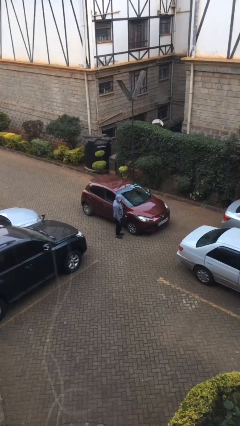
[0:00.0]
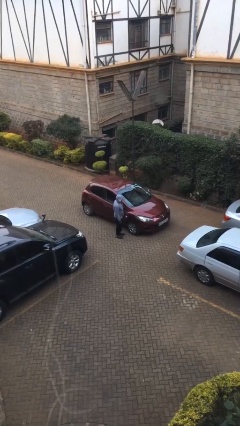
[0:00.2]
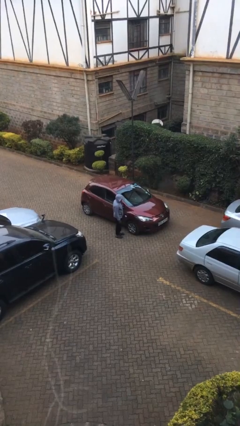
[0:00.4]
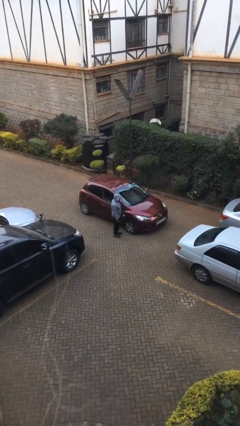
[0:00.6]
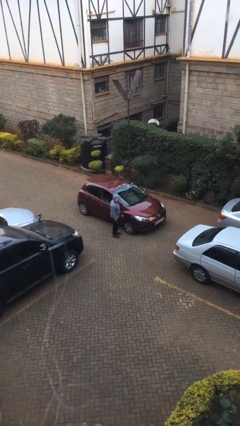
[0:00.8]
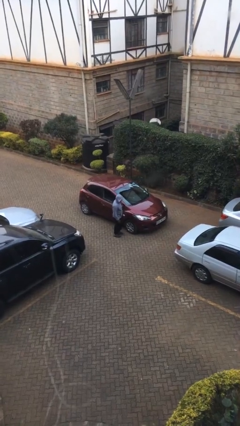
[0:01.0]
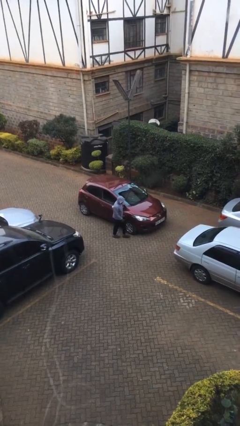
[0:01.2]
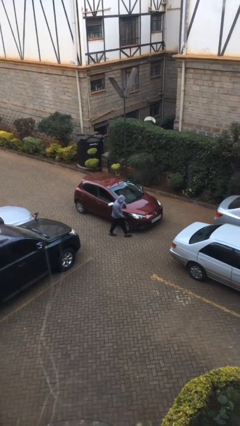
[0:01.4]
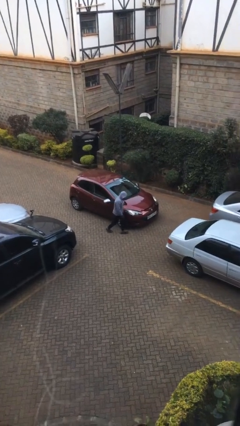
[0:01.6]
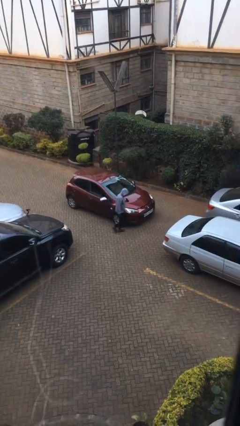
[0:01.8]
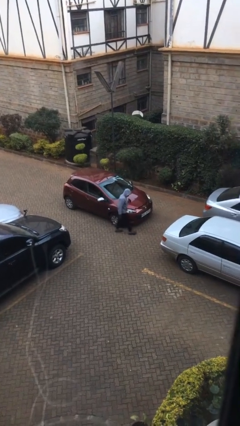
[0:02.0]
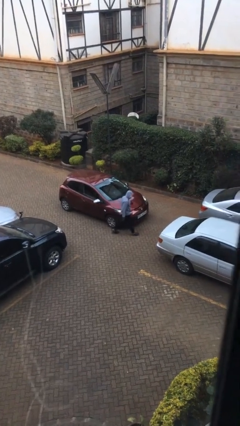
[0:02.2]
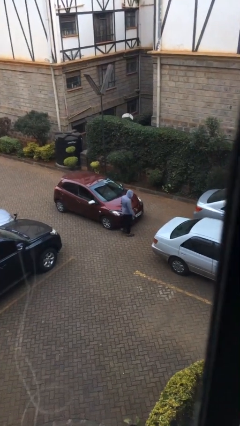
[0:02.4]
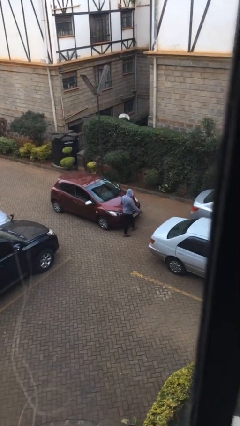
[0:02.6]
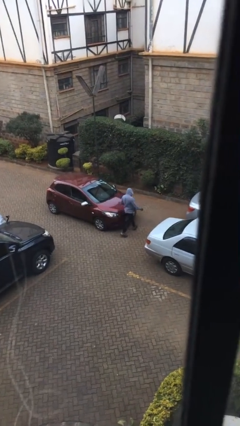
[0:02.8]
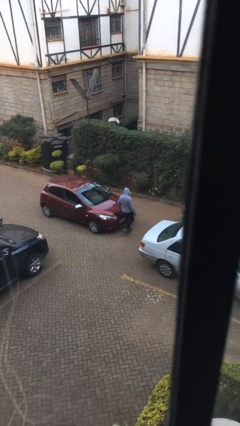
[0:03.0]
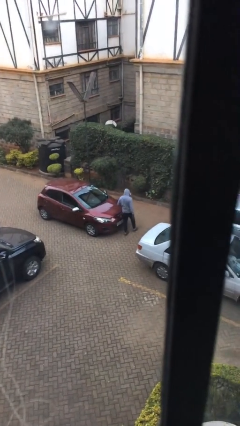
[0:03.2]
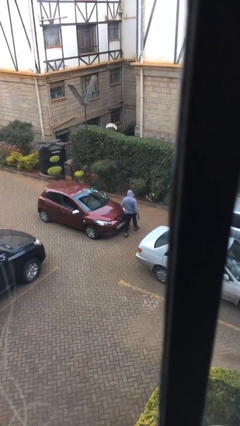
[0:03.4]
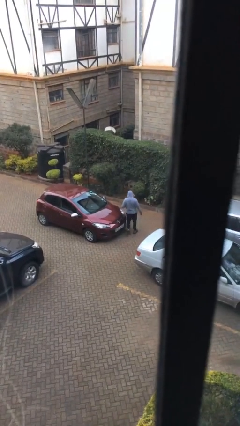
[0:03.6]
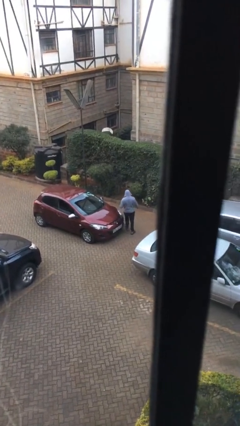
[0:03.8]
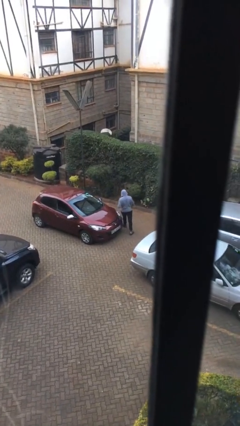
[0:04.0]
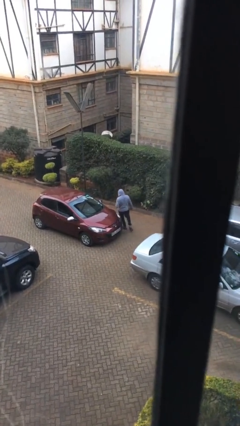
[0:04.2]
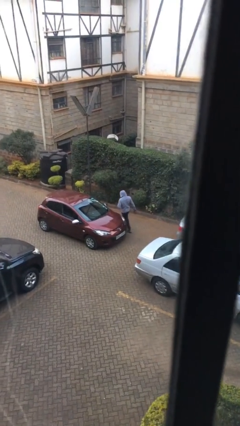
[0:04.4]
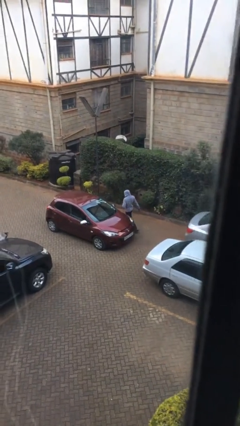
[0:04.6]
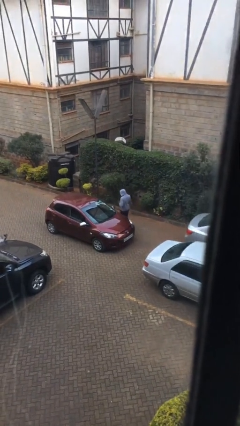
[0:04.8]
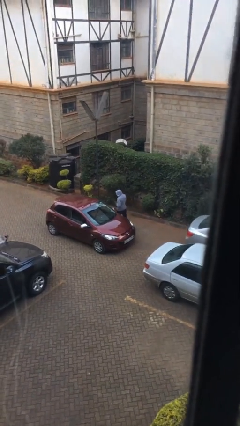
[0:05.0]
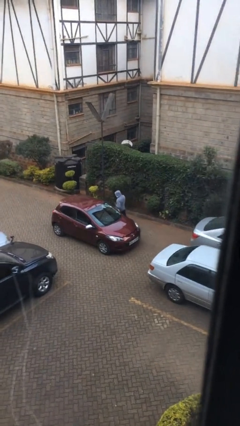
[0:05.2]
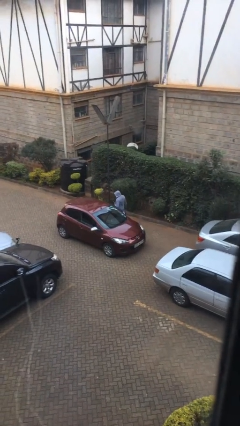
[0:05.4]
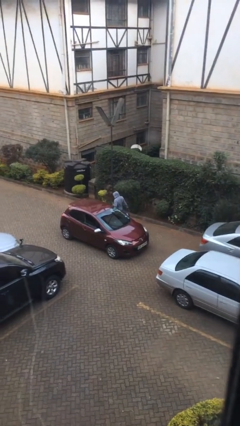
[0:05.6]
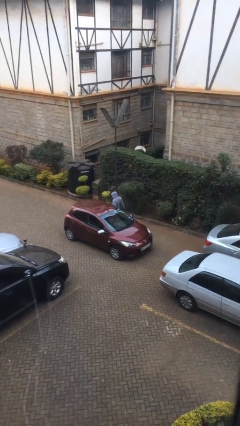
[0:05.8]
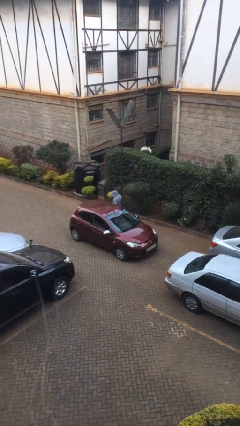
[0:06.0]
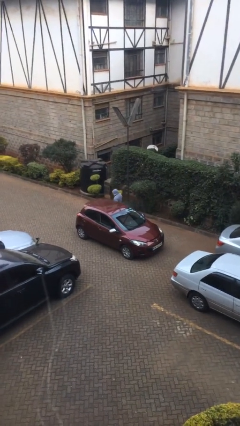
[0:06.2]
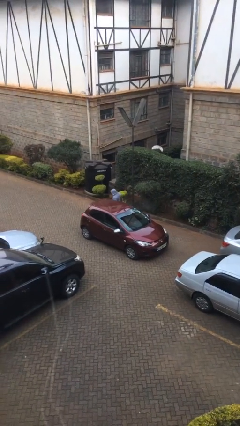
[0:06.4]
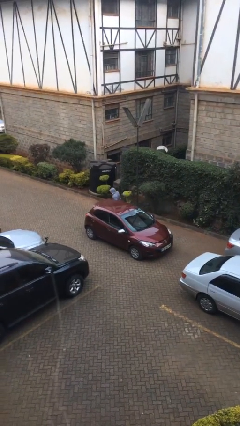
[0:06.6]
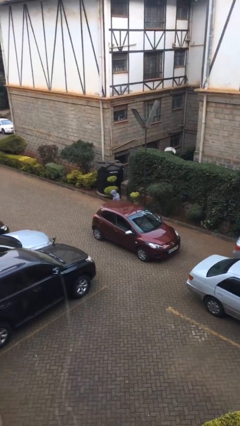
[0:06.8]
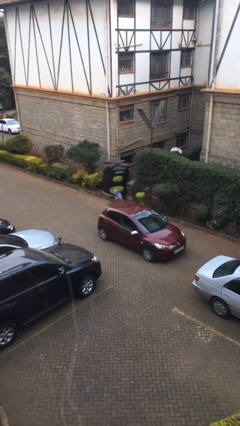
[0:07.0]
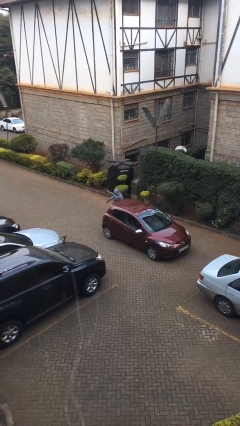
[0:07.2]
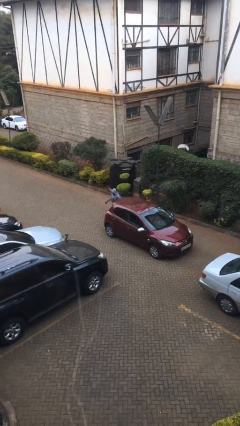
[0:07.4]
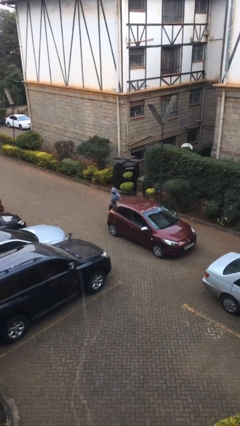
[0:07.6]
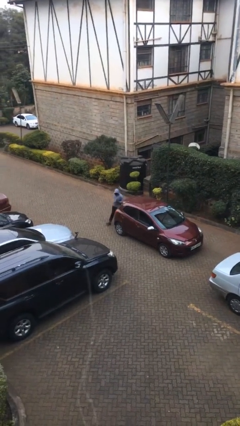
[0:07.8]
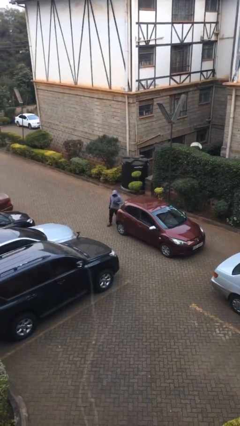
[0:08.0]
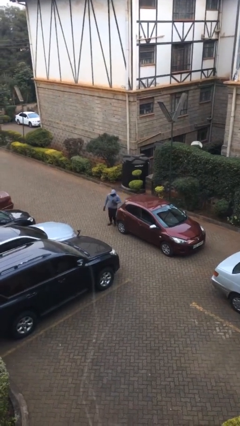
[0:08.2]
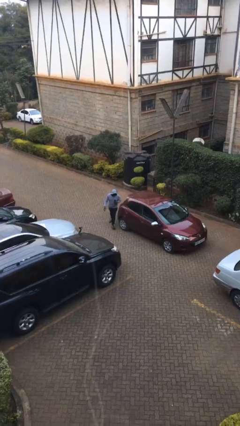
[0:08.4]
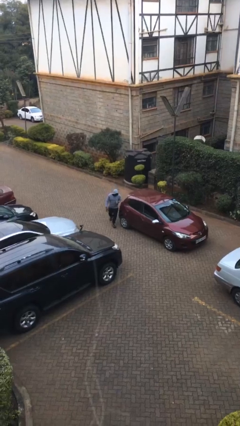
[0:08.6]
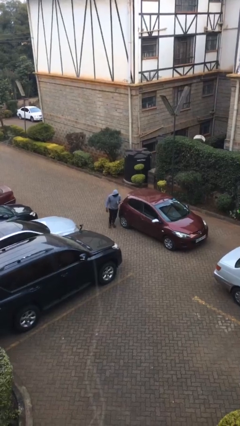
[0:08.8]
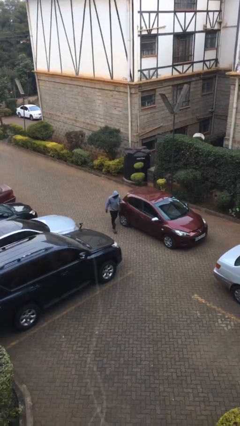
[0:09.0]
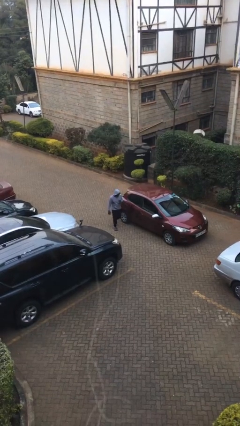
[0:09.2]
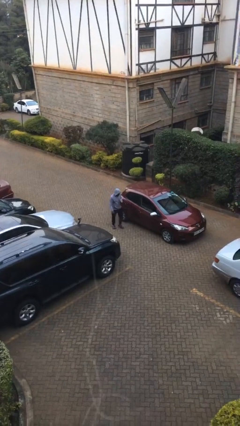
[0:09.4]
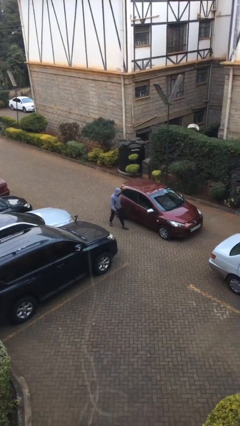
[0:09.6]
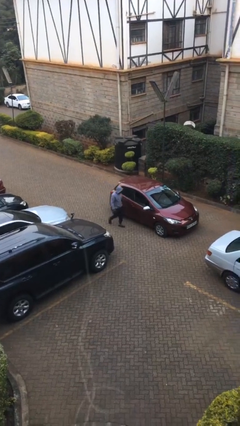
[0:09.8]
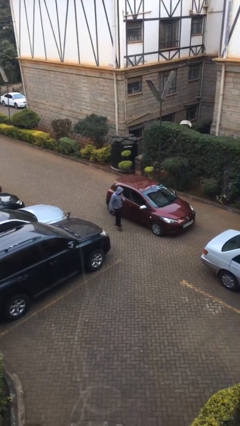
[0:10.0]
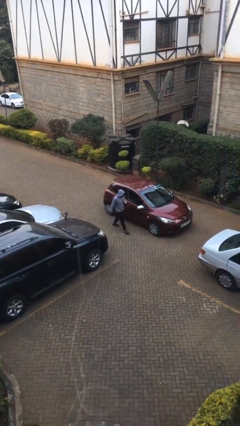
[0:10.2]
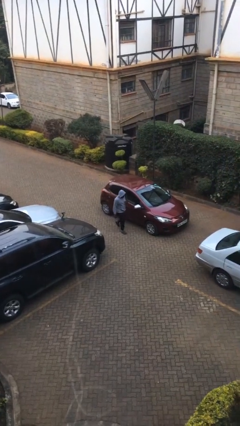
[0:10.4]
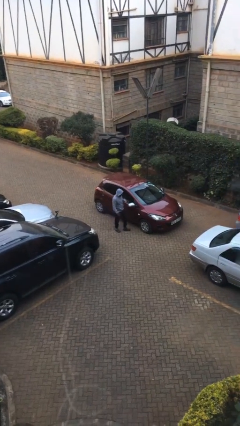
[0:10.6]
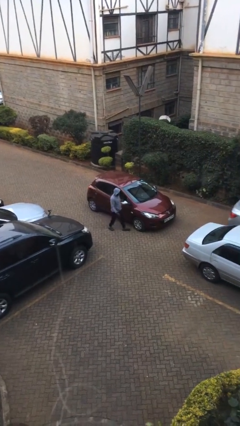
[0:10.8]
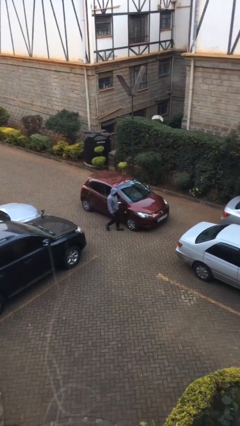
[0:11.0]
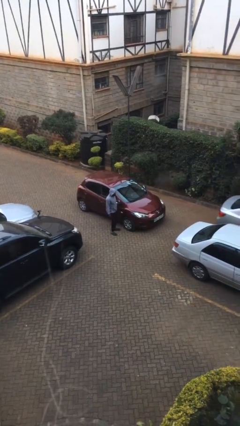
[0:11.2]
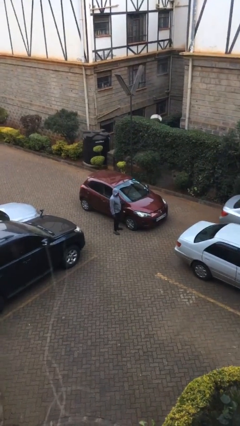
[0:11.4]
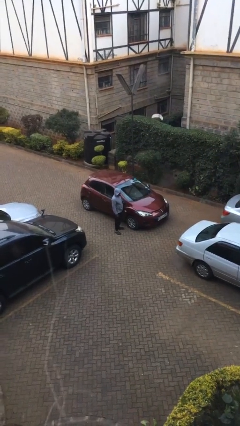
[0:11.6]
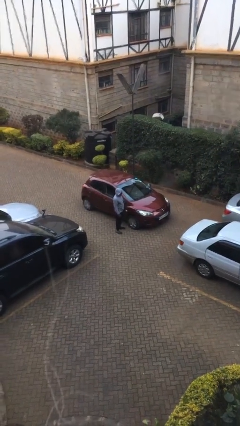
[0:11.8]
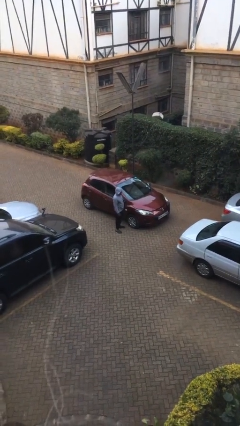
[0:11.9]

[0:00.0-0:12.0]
person walks around car

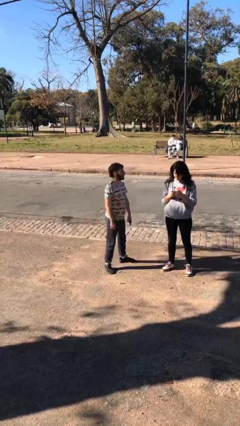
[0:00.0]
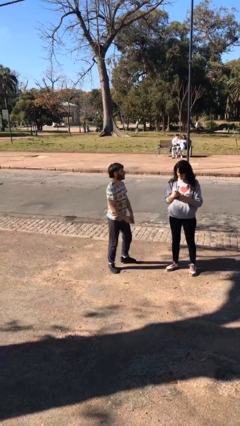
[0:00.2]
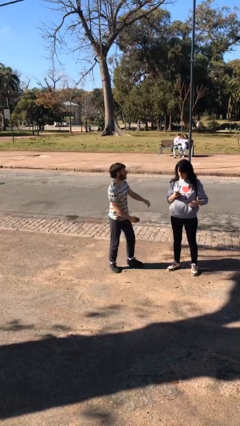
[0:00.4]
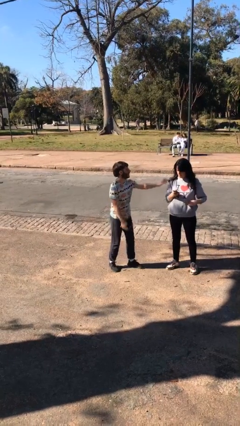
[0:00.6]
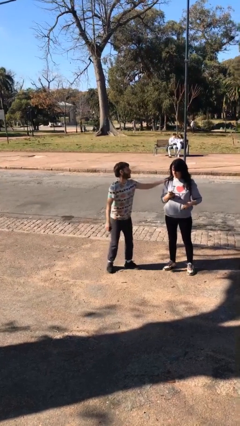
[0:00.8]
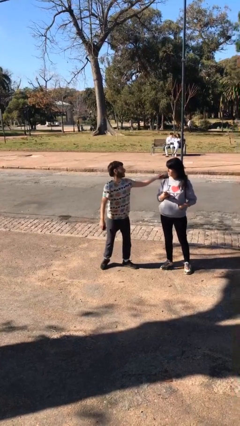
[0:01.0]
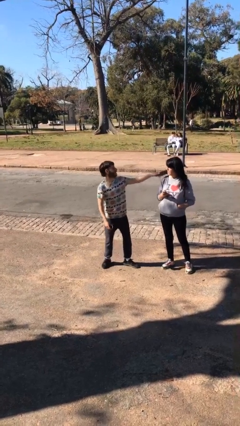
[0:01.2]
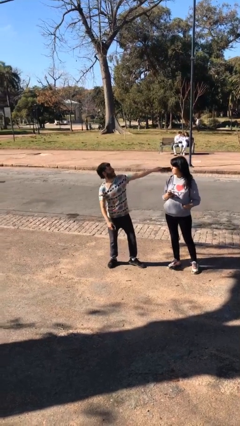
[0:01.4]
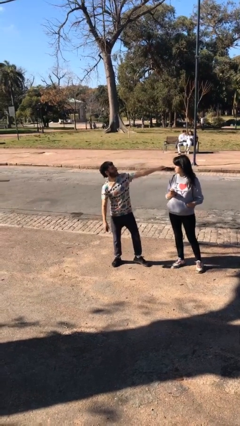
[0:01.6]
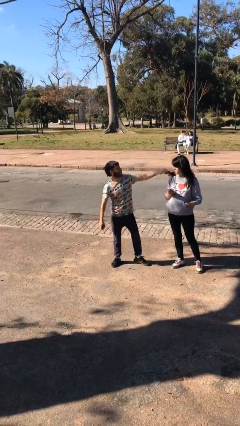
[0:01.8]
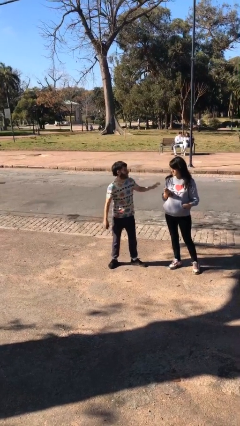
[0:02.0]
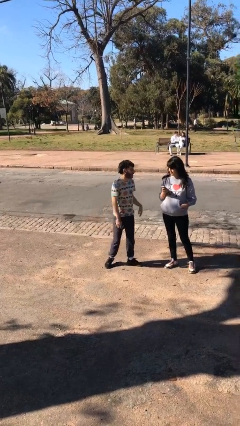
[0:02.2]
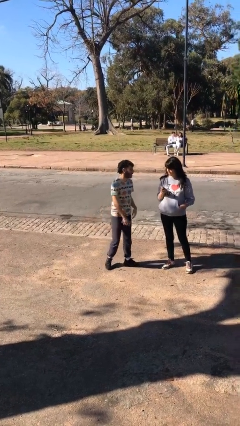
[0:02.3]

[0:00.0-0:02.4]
person grabs person by hair

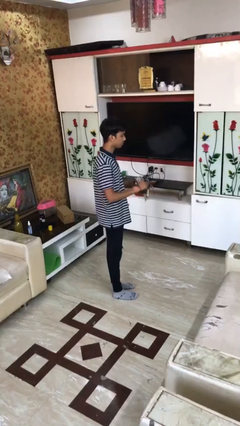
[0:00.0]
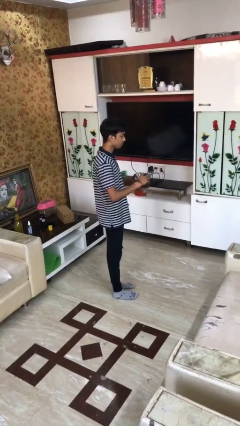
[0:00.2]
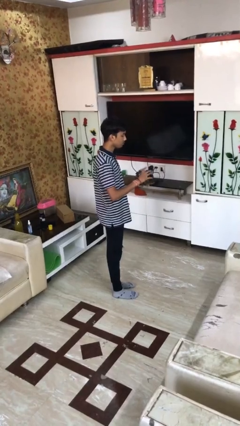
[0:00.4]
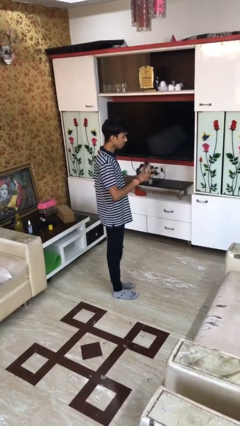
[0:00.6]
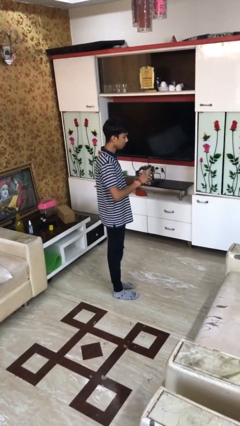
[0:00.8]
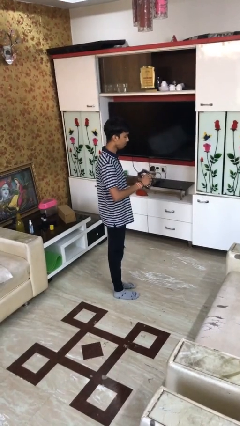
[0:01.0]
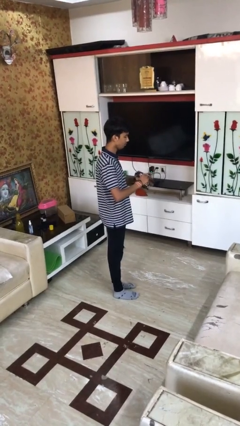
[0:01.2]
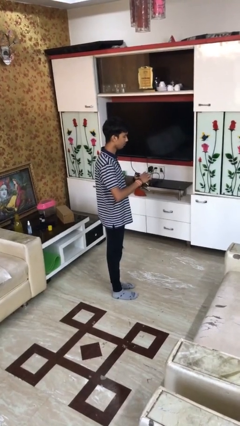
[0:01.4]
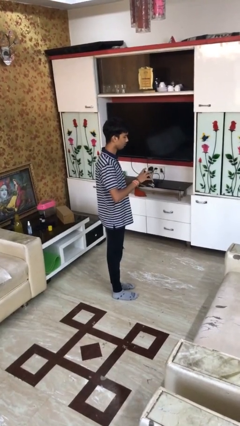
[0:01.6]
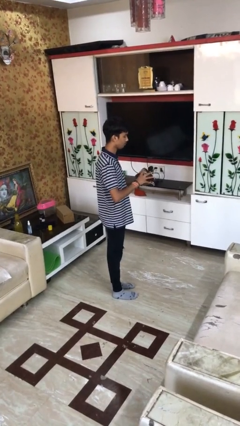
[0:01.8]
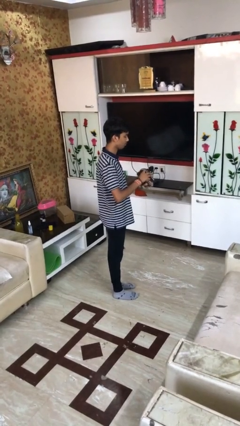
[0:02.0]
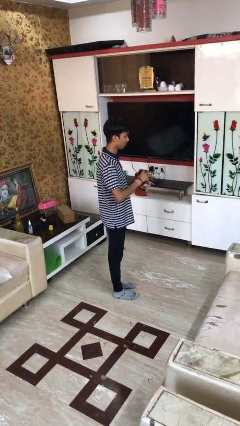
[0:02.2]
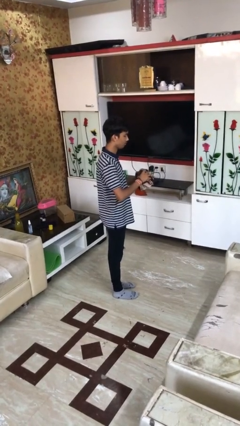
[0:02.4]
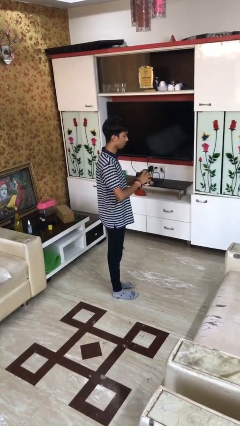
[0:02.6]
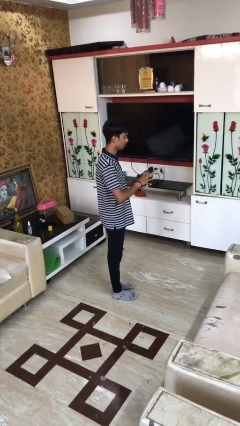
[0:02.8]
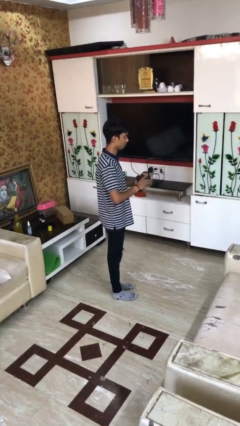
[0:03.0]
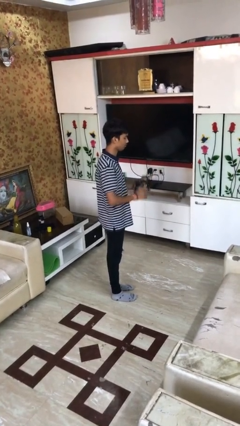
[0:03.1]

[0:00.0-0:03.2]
person squeezes object

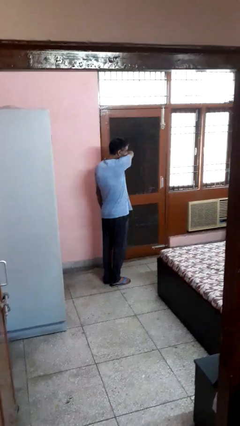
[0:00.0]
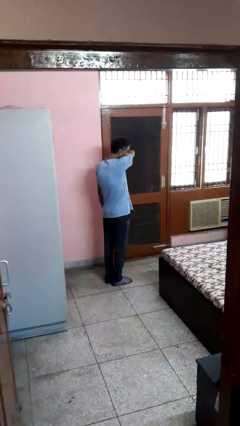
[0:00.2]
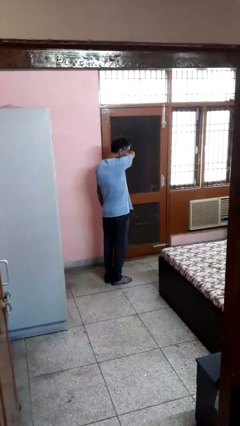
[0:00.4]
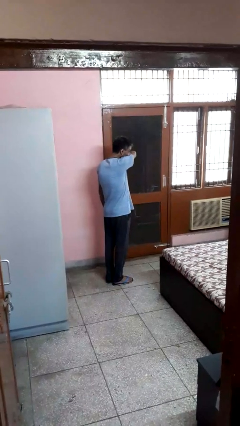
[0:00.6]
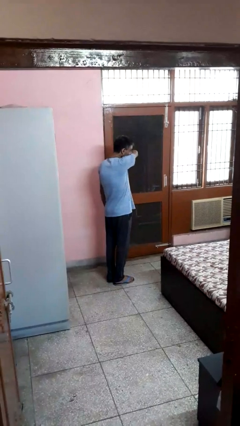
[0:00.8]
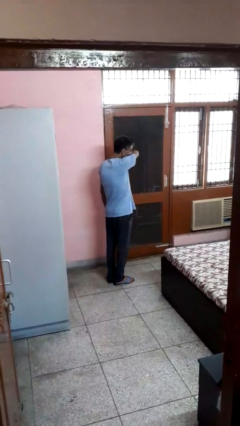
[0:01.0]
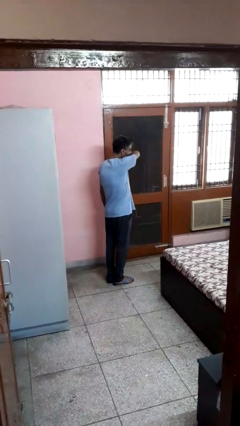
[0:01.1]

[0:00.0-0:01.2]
person sneezes into arm
